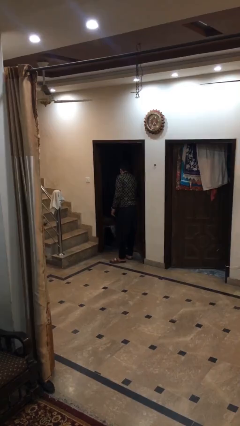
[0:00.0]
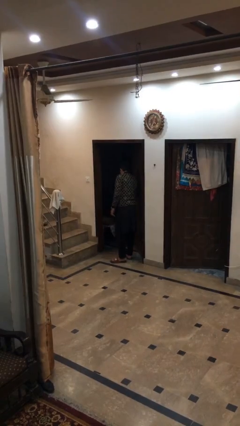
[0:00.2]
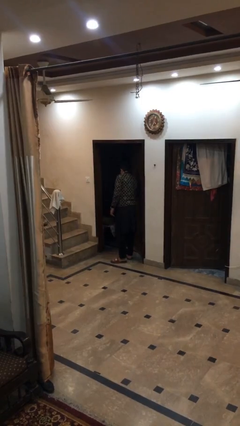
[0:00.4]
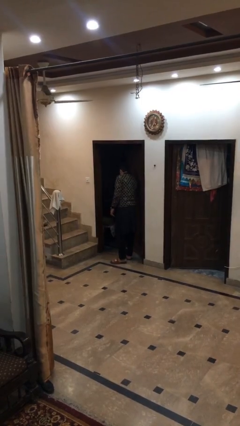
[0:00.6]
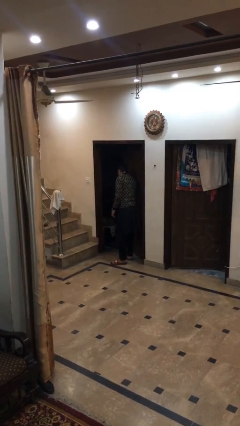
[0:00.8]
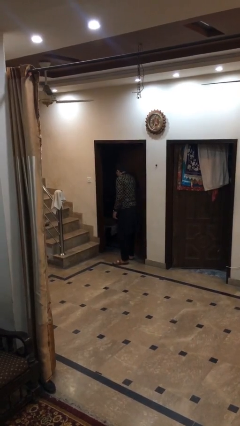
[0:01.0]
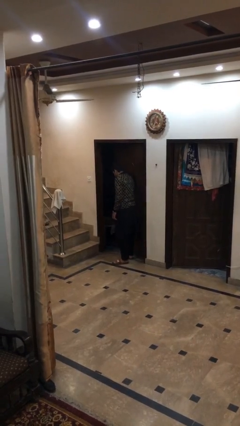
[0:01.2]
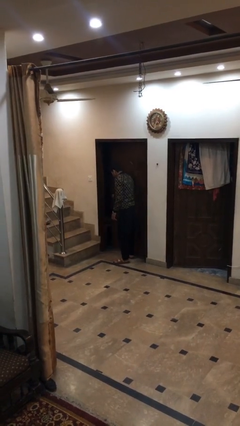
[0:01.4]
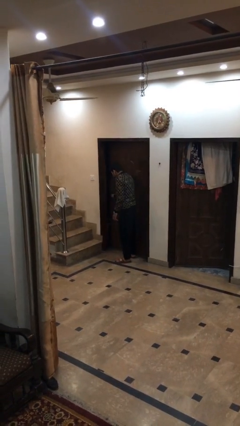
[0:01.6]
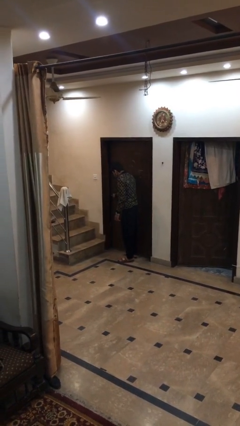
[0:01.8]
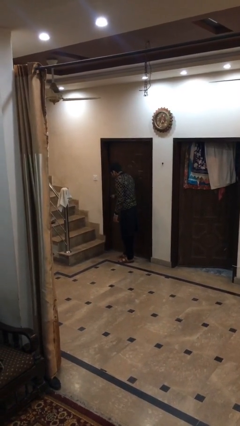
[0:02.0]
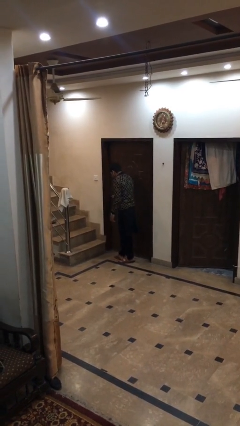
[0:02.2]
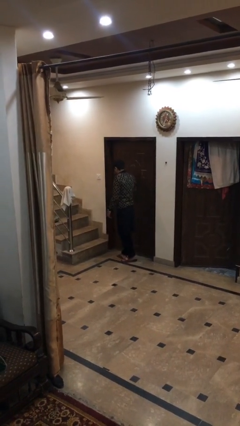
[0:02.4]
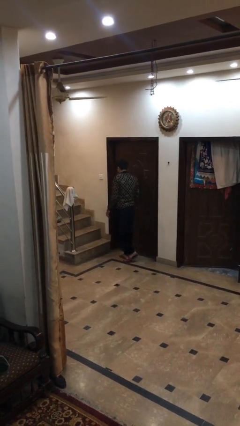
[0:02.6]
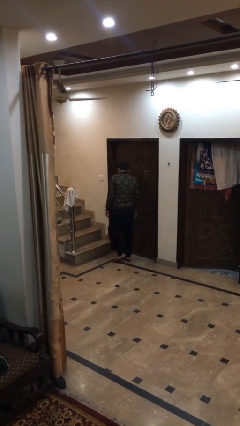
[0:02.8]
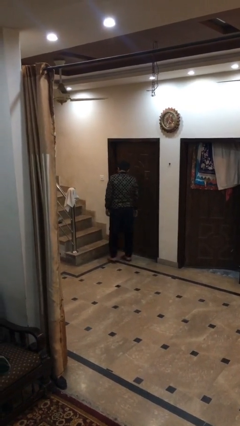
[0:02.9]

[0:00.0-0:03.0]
person closes facility door

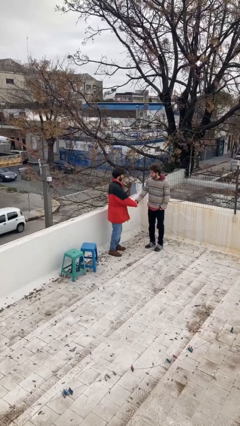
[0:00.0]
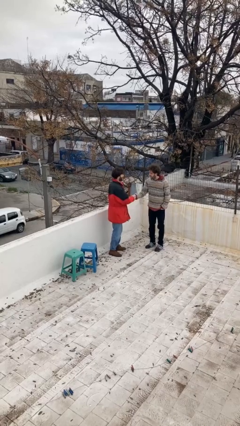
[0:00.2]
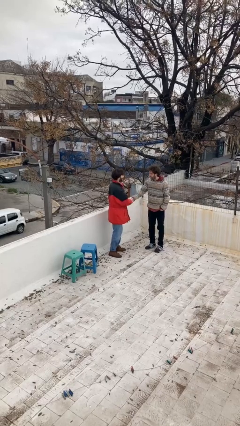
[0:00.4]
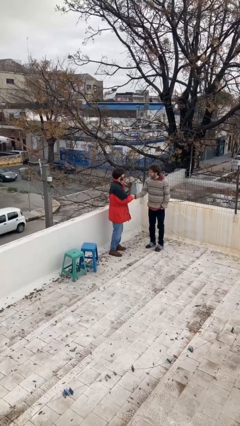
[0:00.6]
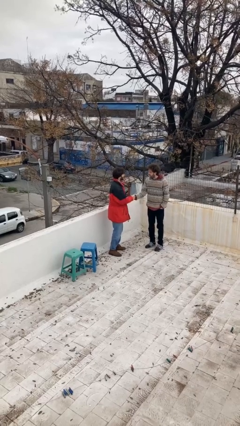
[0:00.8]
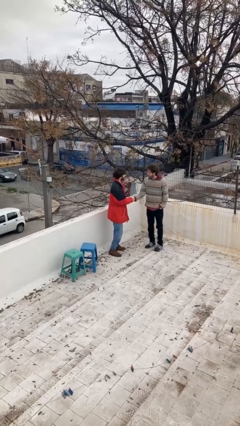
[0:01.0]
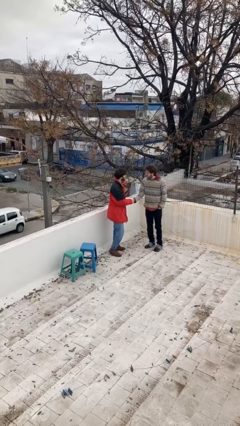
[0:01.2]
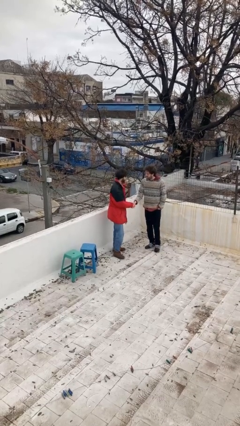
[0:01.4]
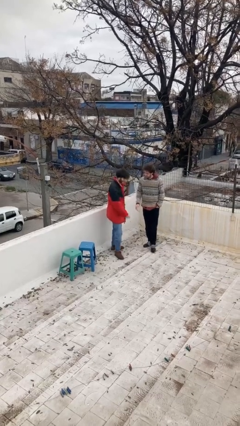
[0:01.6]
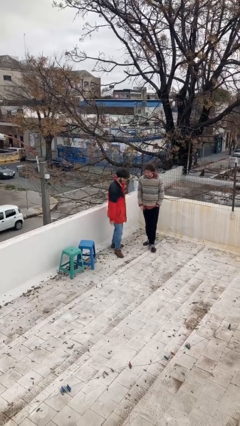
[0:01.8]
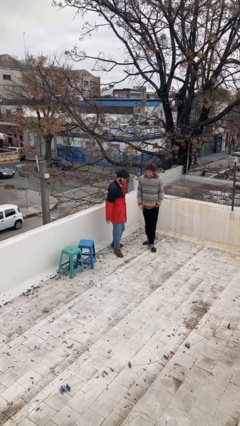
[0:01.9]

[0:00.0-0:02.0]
person shakes hand

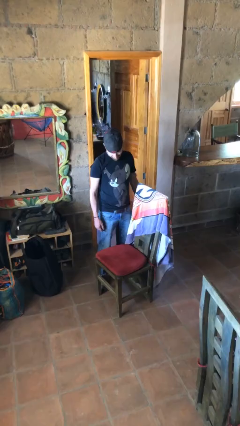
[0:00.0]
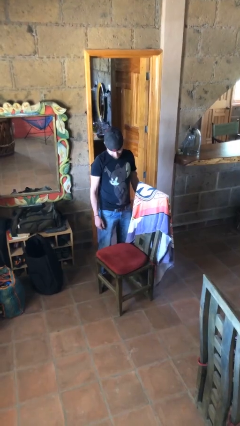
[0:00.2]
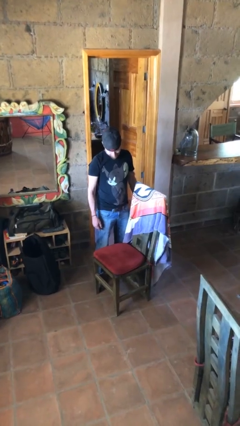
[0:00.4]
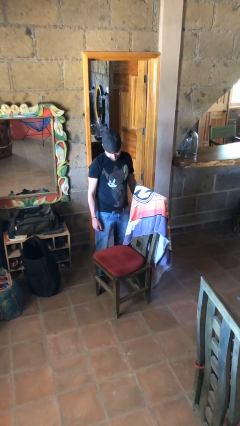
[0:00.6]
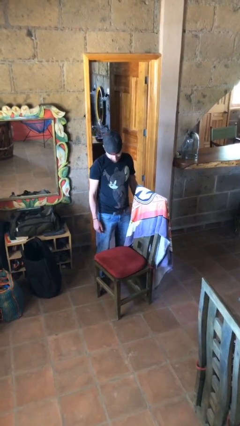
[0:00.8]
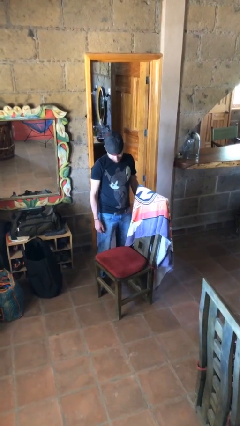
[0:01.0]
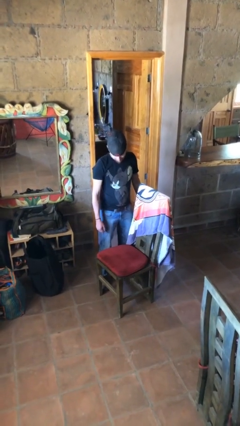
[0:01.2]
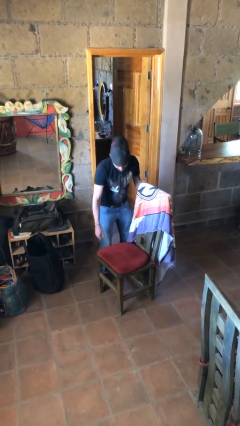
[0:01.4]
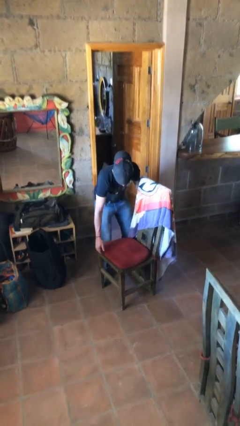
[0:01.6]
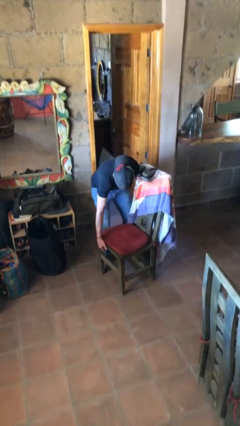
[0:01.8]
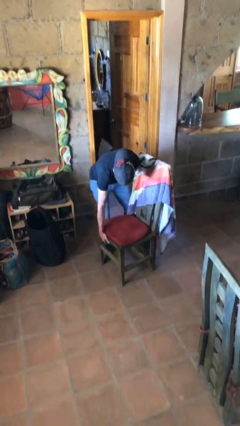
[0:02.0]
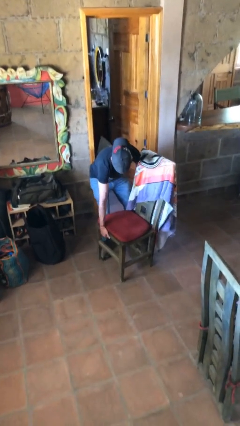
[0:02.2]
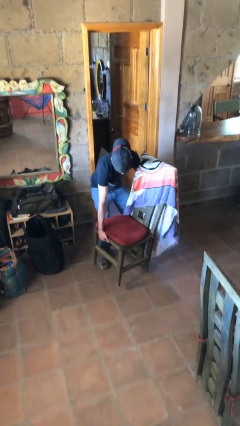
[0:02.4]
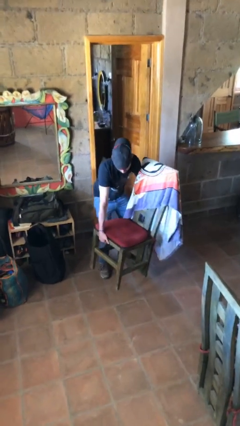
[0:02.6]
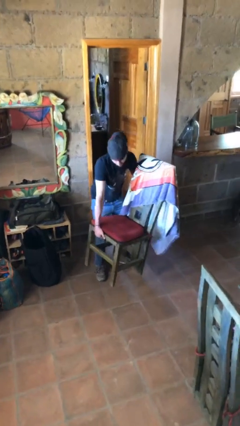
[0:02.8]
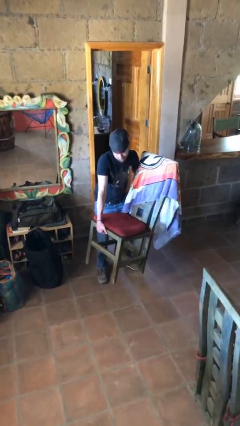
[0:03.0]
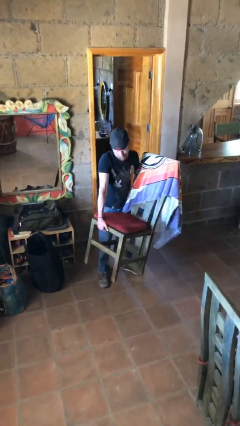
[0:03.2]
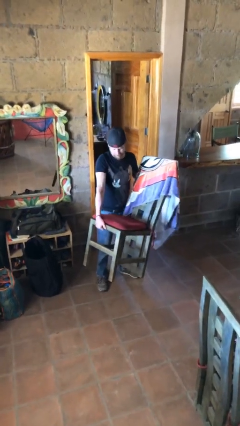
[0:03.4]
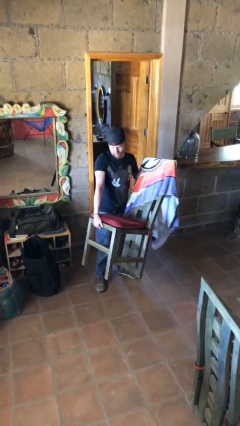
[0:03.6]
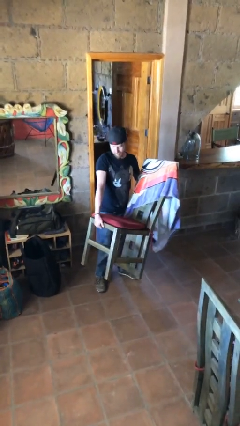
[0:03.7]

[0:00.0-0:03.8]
person picks up object from floor

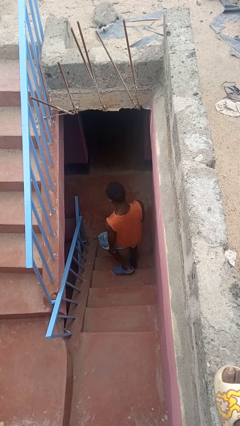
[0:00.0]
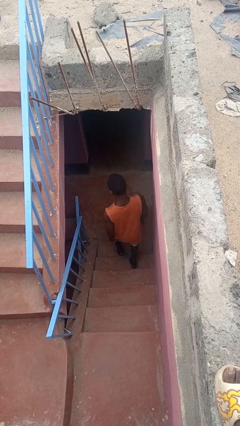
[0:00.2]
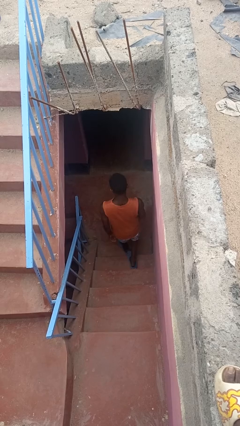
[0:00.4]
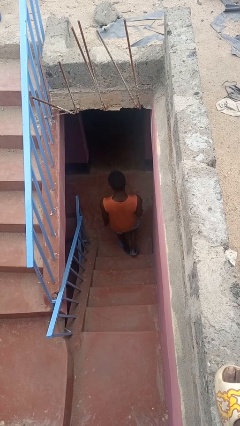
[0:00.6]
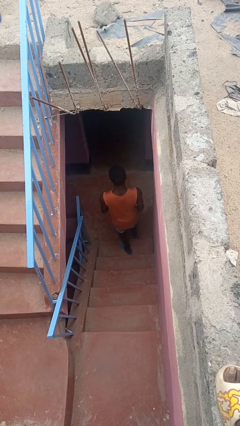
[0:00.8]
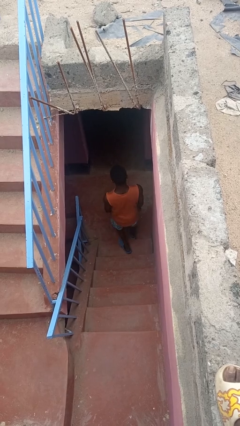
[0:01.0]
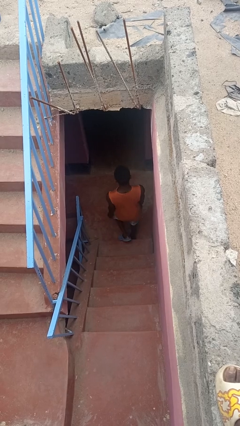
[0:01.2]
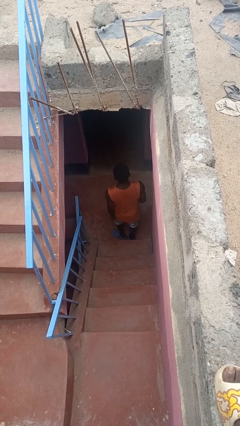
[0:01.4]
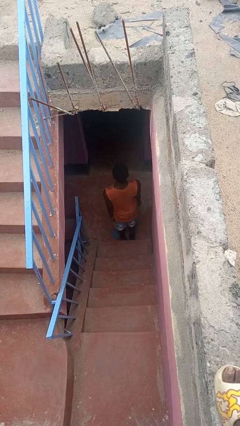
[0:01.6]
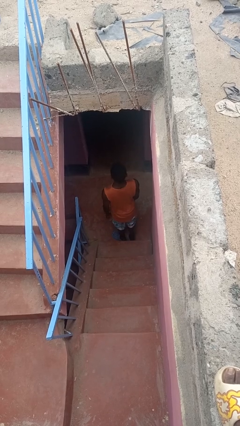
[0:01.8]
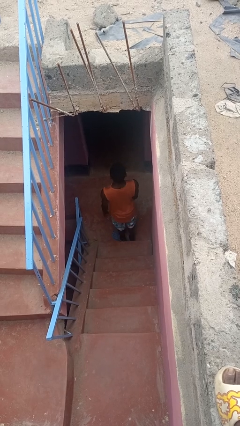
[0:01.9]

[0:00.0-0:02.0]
person climbs down stairs

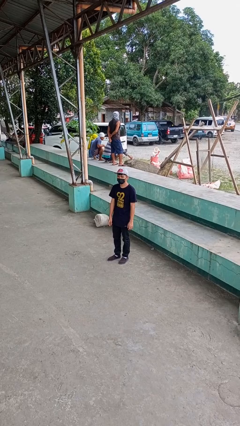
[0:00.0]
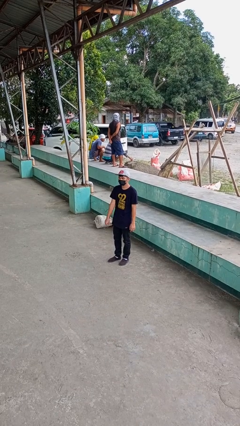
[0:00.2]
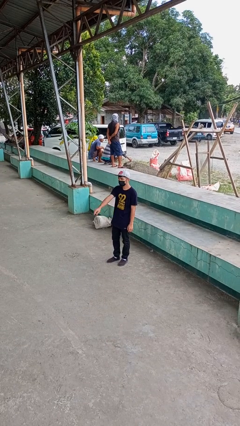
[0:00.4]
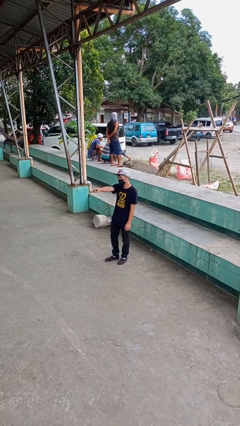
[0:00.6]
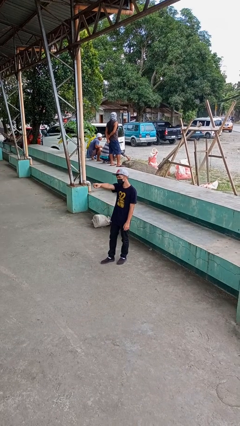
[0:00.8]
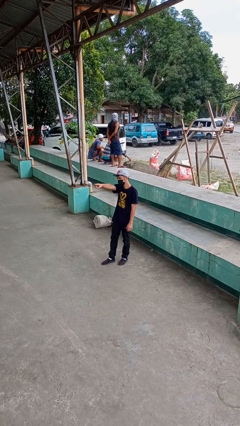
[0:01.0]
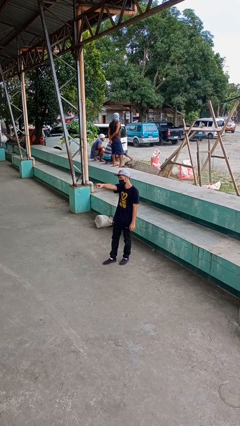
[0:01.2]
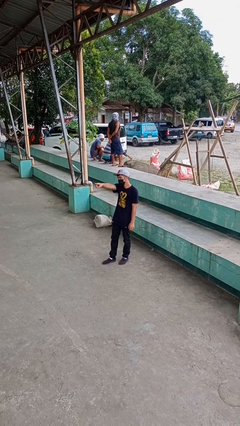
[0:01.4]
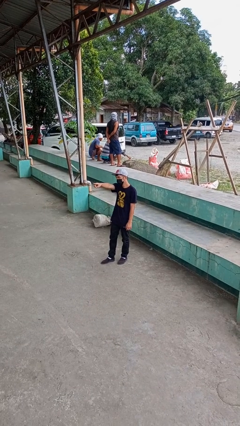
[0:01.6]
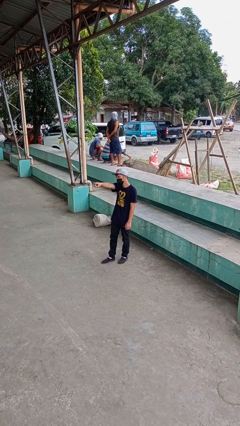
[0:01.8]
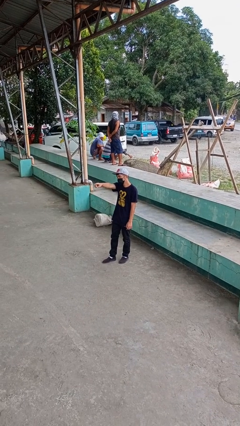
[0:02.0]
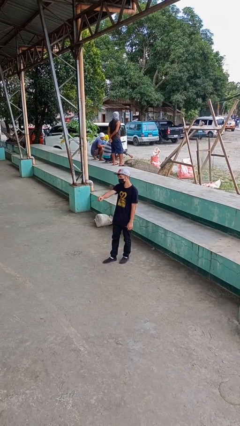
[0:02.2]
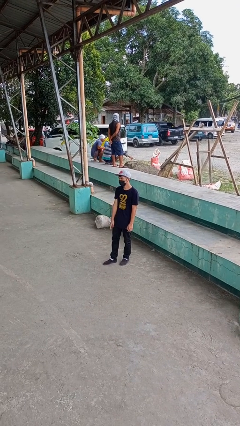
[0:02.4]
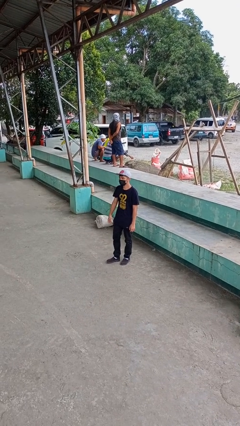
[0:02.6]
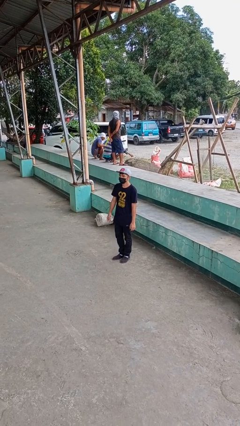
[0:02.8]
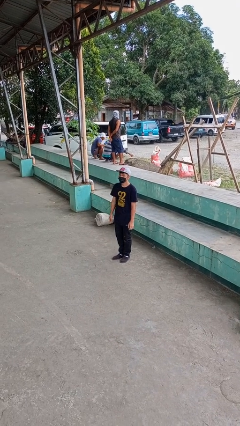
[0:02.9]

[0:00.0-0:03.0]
person points at person

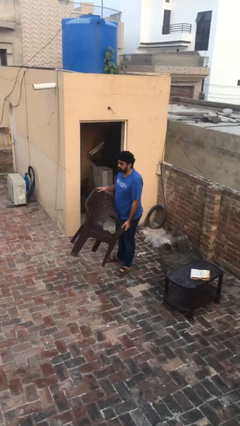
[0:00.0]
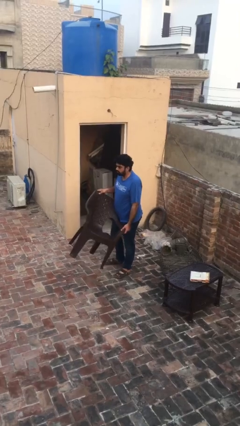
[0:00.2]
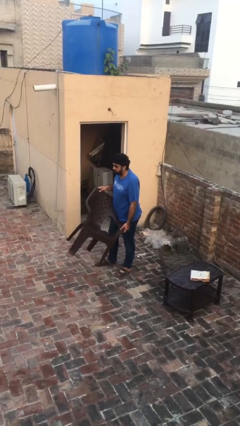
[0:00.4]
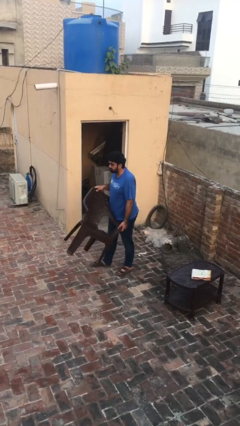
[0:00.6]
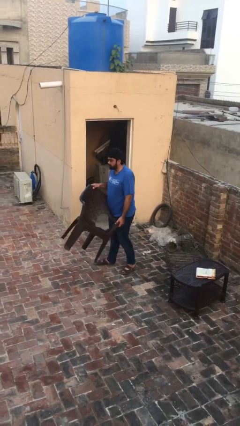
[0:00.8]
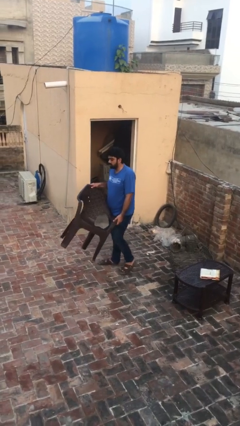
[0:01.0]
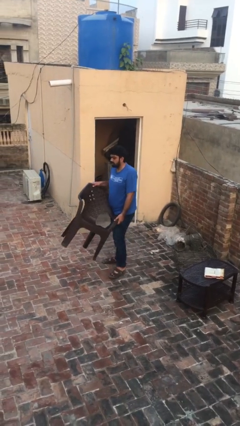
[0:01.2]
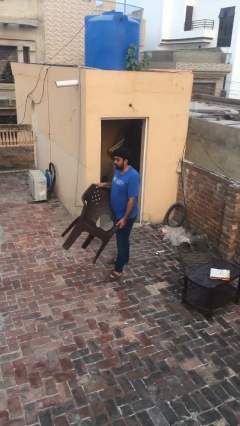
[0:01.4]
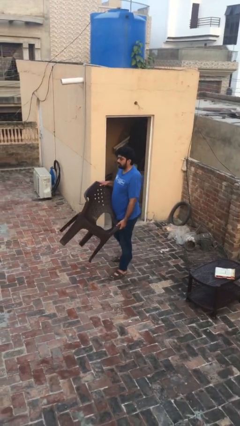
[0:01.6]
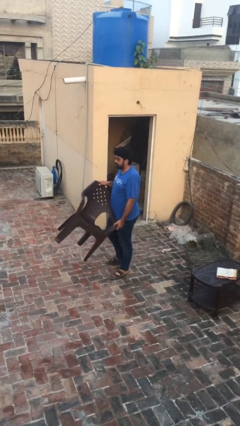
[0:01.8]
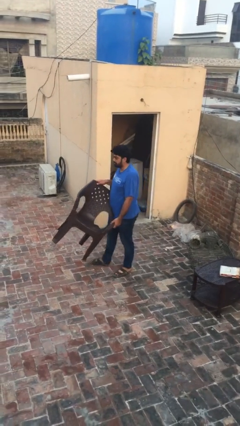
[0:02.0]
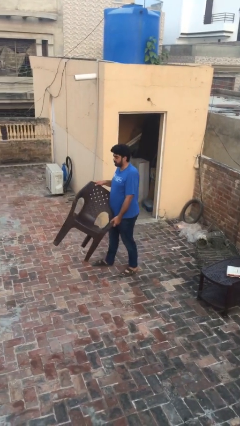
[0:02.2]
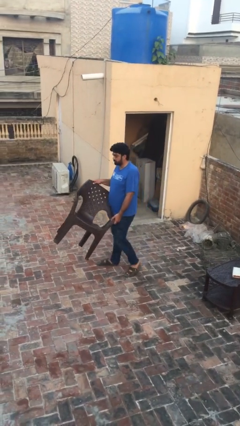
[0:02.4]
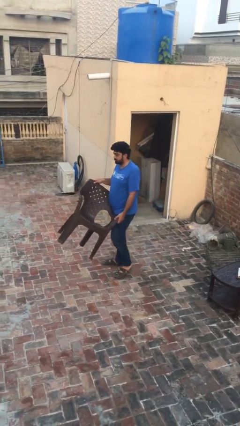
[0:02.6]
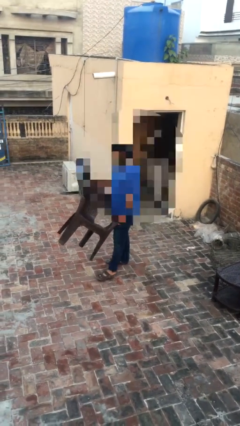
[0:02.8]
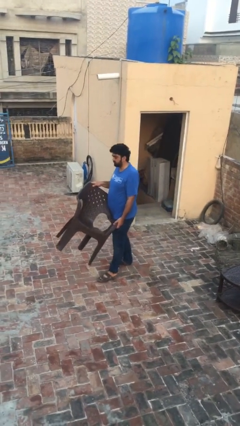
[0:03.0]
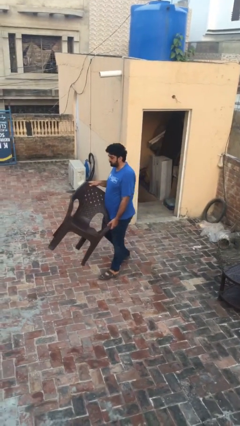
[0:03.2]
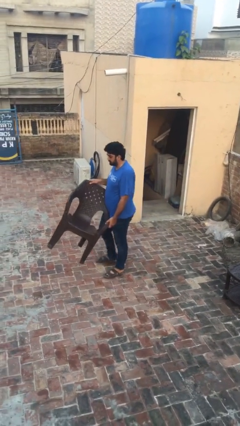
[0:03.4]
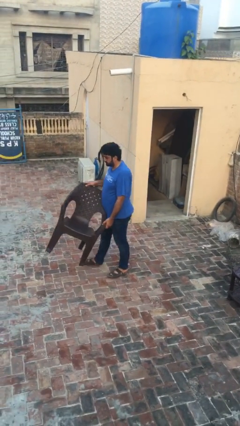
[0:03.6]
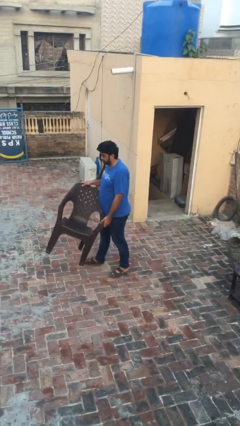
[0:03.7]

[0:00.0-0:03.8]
person carries heavy object

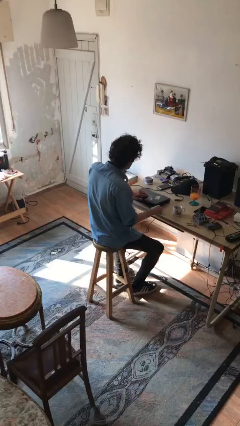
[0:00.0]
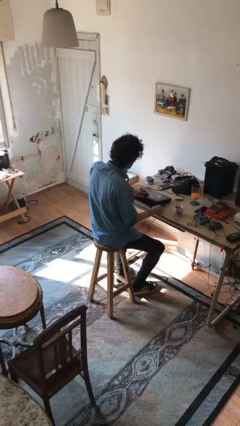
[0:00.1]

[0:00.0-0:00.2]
person interacts with laptop
